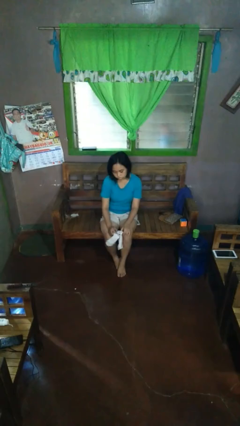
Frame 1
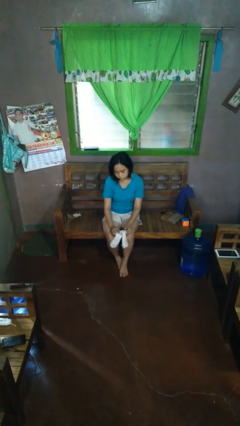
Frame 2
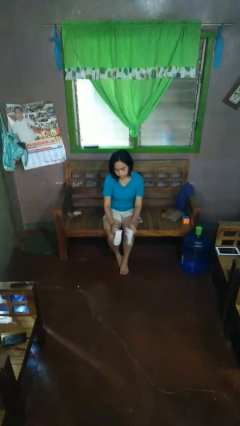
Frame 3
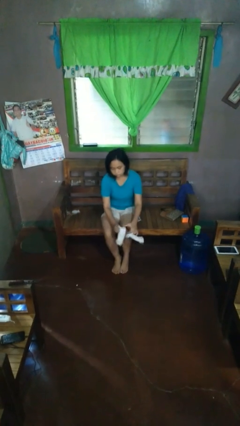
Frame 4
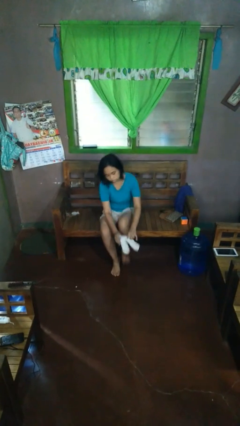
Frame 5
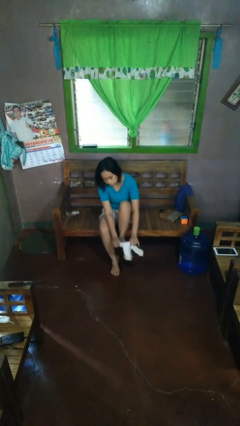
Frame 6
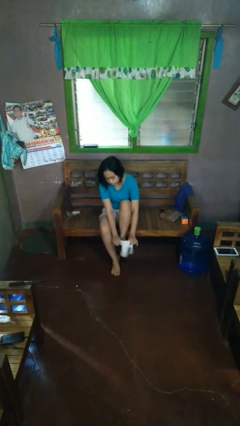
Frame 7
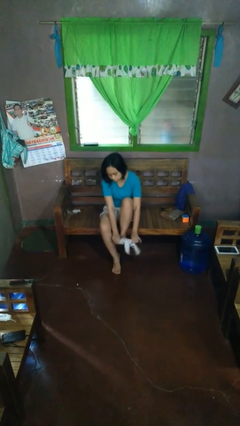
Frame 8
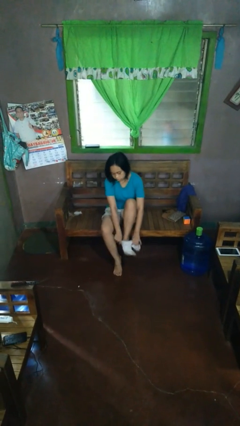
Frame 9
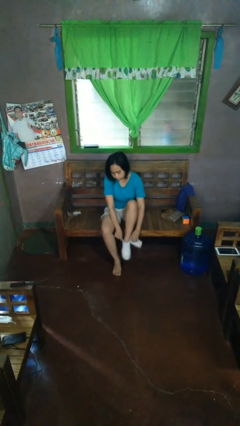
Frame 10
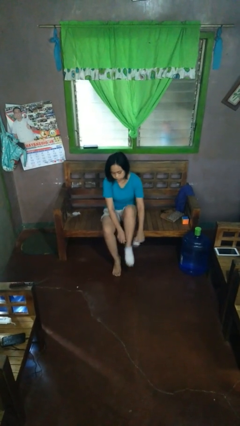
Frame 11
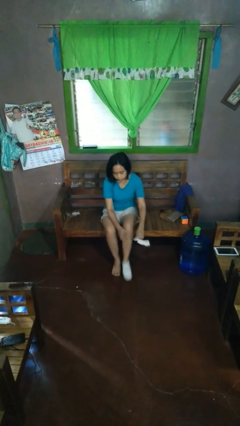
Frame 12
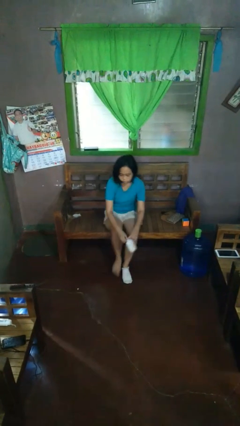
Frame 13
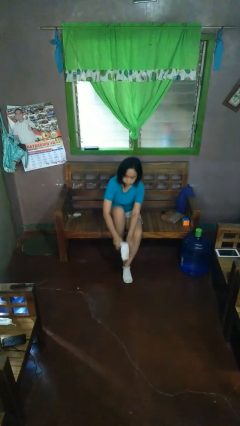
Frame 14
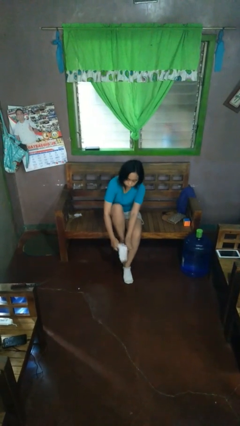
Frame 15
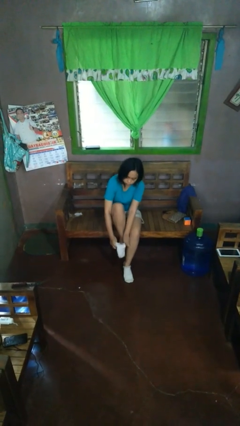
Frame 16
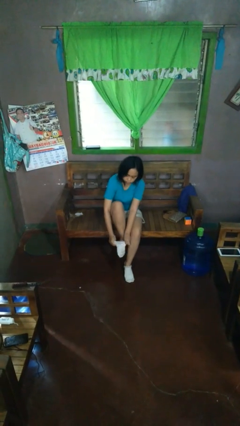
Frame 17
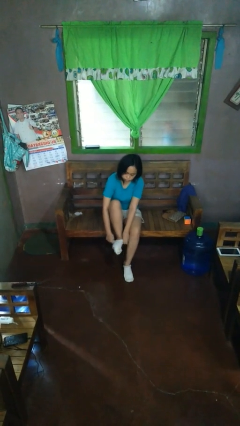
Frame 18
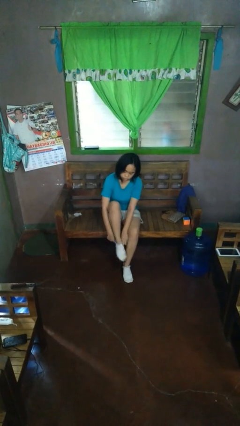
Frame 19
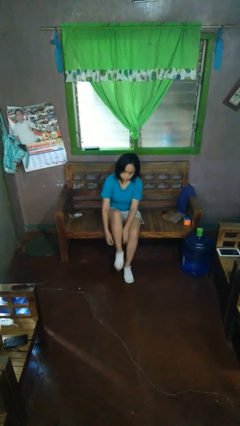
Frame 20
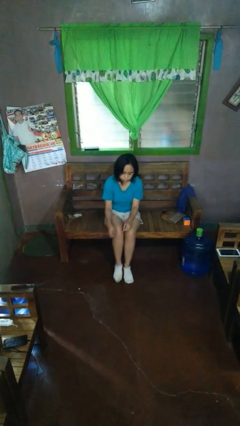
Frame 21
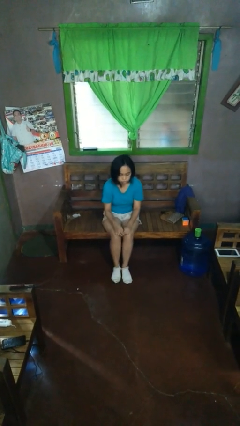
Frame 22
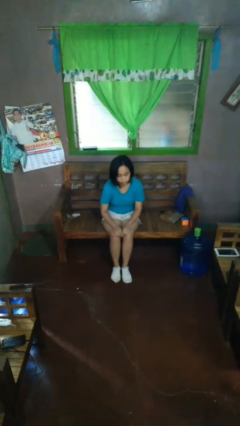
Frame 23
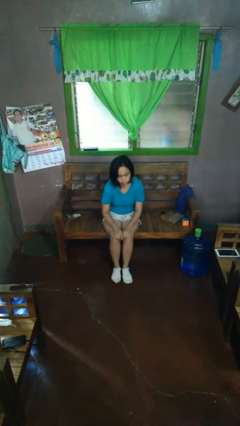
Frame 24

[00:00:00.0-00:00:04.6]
person puts on socks

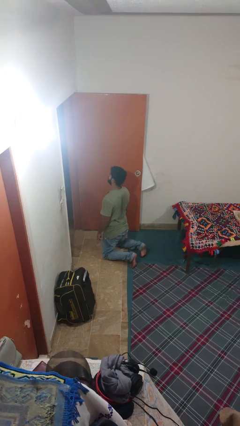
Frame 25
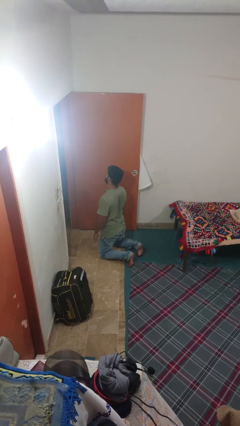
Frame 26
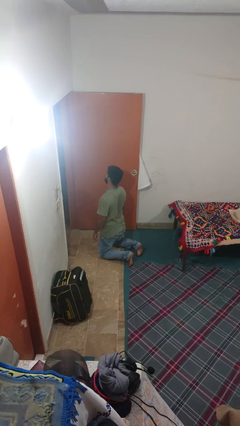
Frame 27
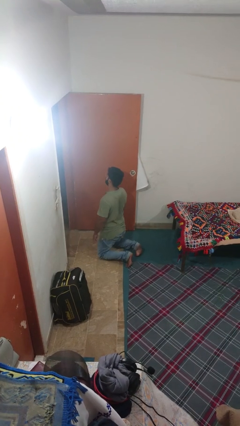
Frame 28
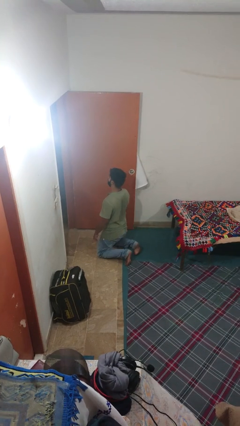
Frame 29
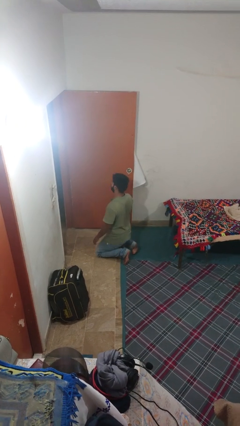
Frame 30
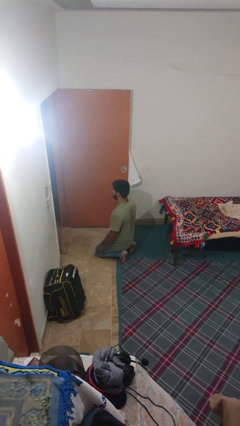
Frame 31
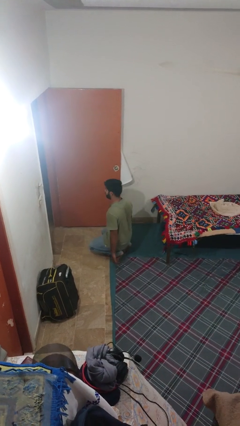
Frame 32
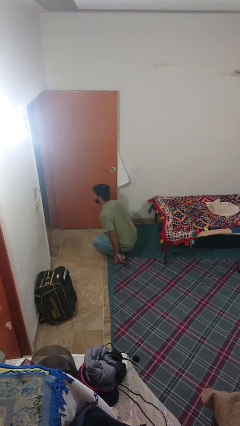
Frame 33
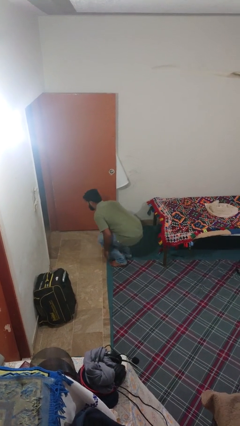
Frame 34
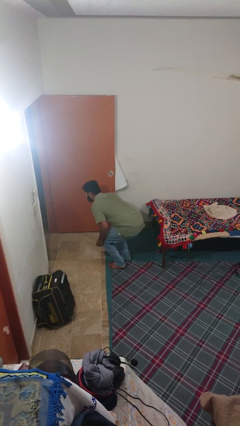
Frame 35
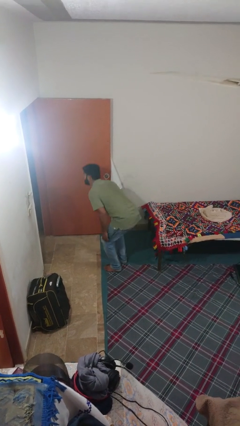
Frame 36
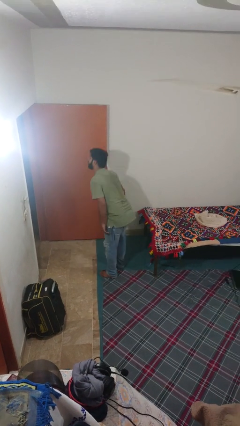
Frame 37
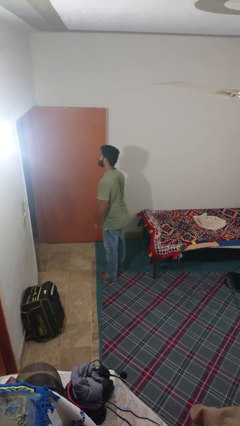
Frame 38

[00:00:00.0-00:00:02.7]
person stands up from floor

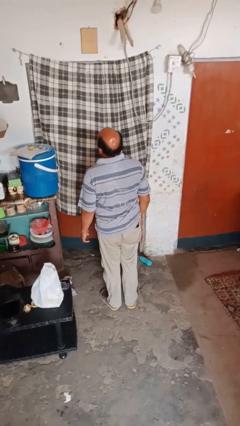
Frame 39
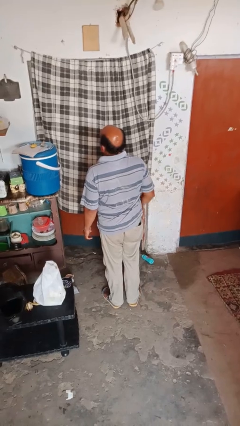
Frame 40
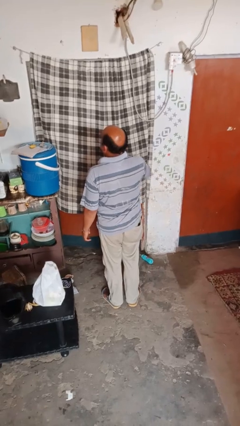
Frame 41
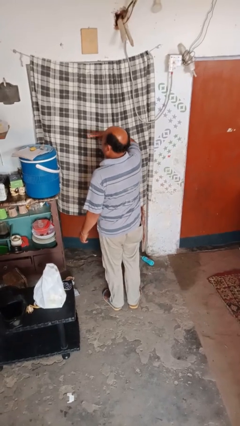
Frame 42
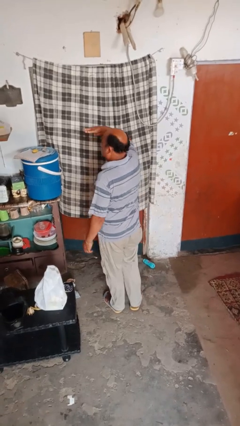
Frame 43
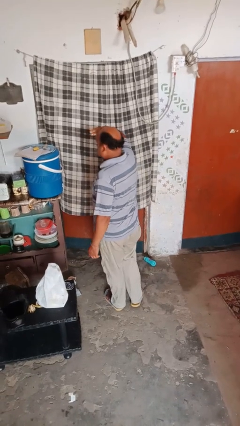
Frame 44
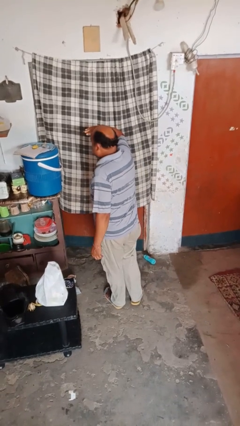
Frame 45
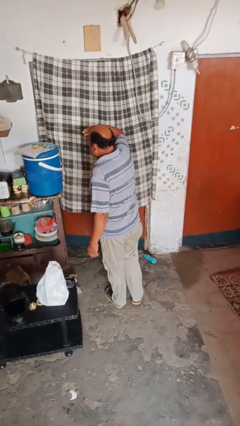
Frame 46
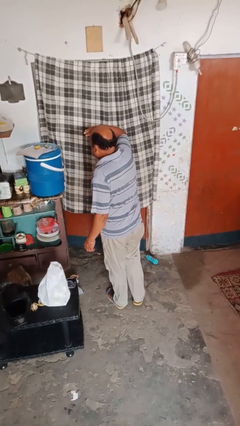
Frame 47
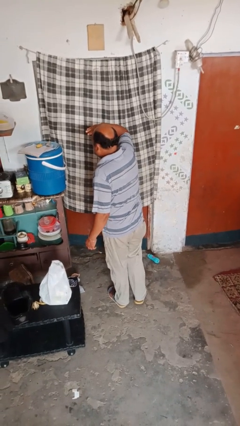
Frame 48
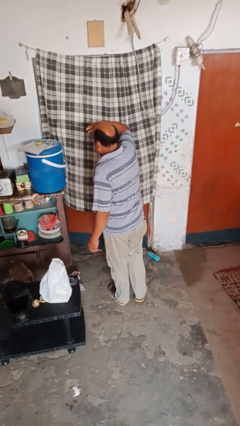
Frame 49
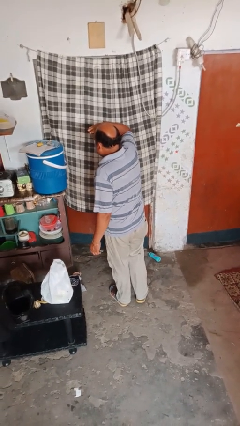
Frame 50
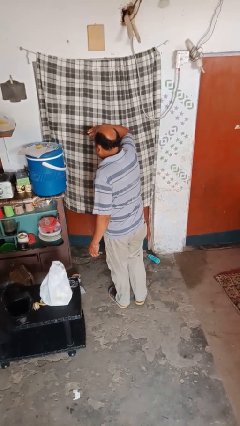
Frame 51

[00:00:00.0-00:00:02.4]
person salutes

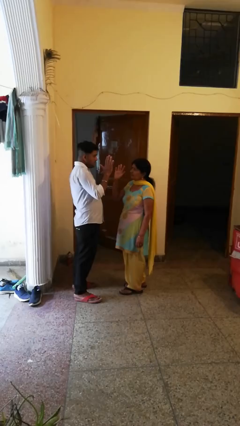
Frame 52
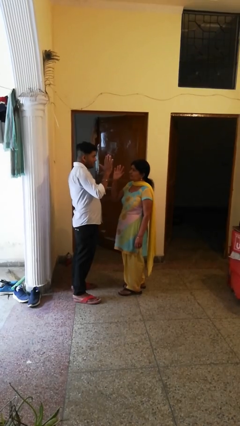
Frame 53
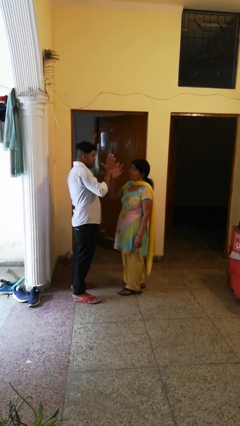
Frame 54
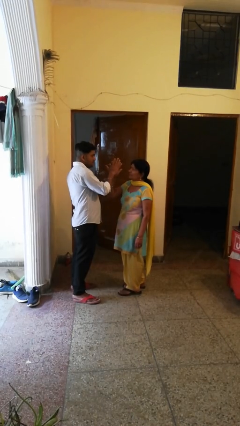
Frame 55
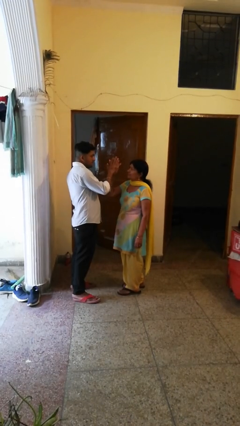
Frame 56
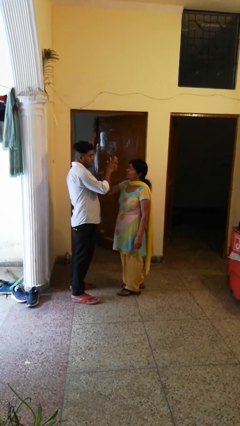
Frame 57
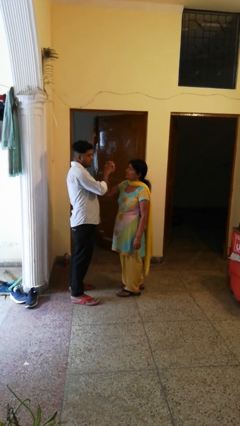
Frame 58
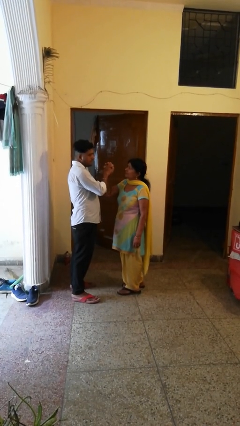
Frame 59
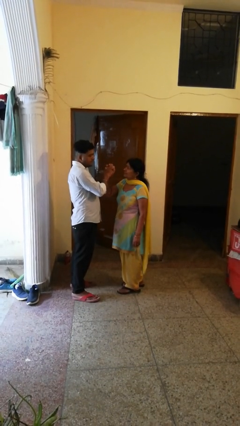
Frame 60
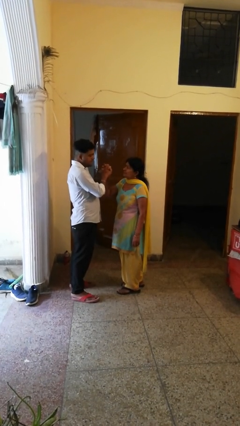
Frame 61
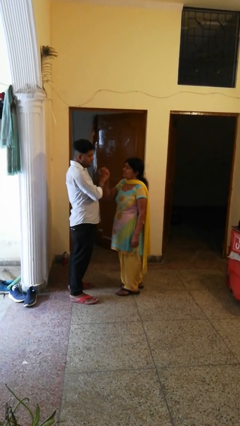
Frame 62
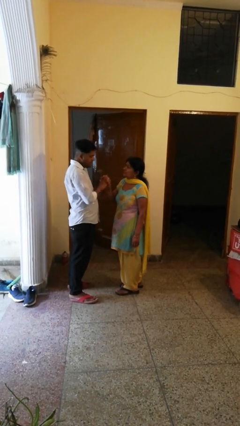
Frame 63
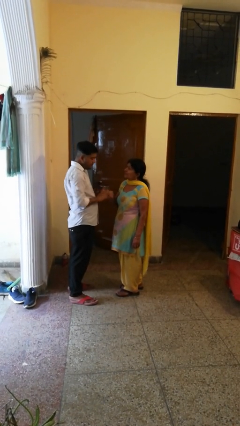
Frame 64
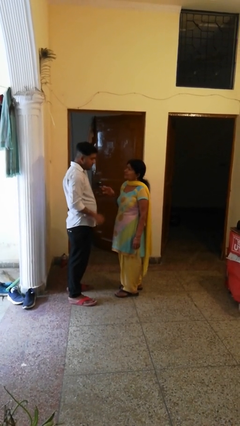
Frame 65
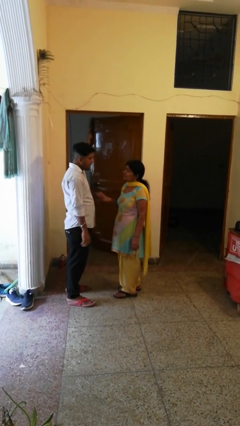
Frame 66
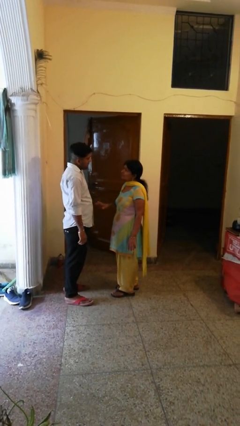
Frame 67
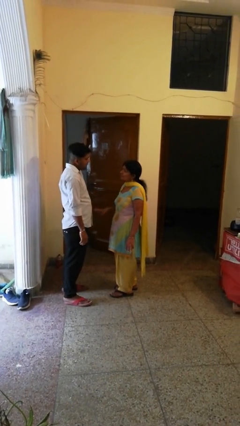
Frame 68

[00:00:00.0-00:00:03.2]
person highfives hand

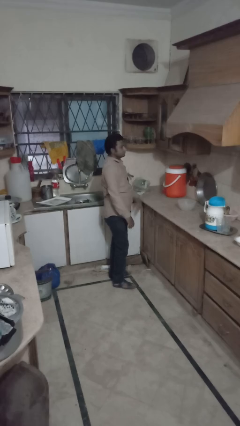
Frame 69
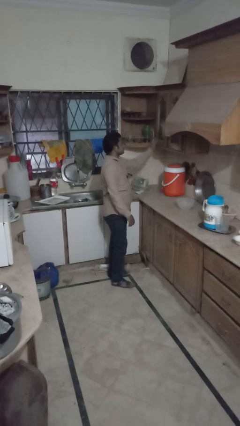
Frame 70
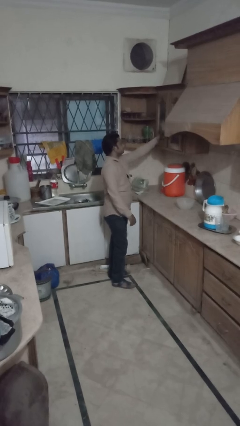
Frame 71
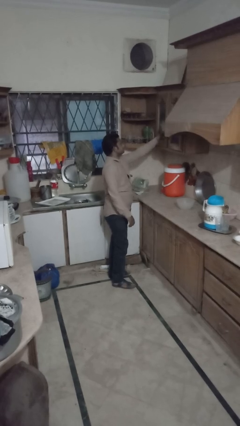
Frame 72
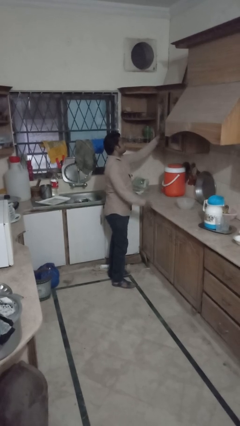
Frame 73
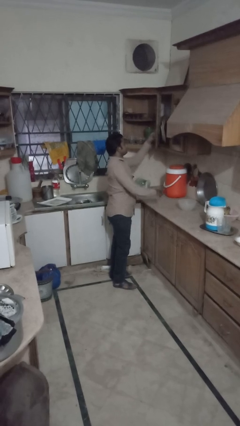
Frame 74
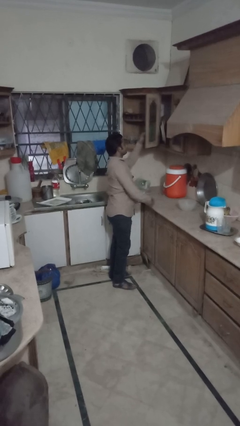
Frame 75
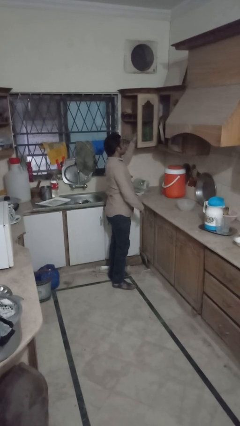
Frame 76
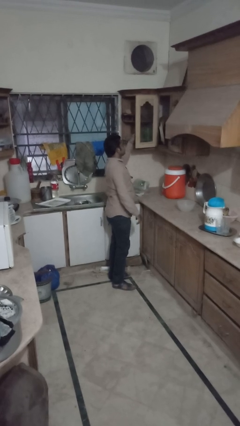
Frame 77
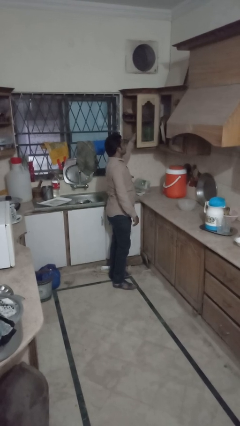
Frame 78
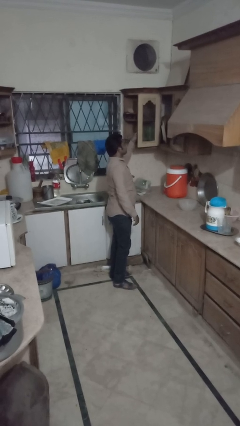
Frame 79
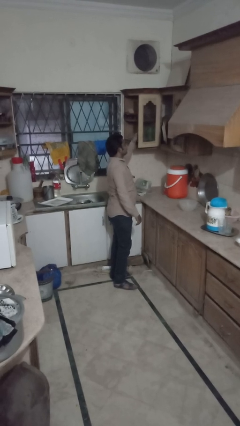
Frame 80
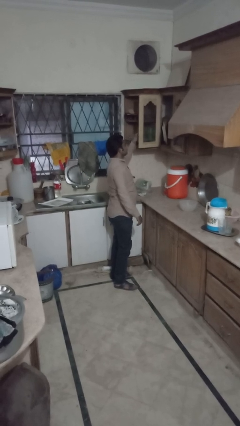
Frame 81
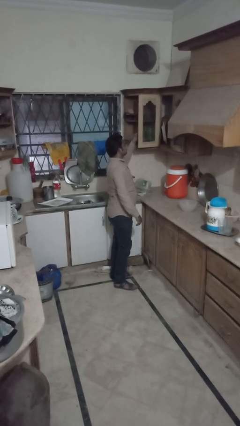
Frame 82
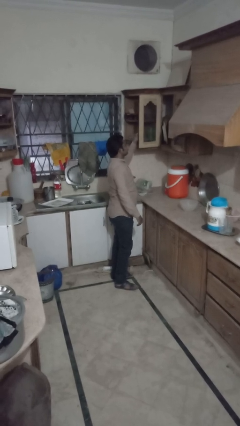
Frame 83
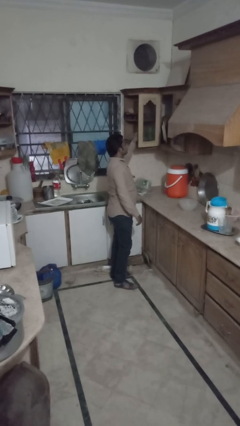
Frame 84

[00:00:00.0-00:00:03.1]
person opens cabinet

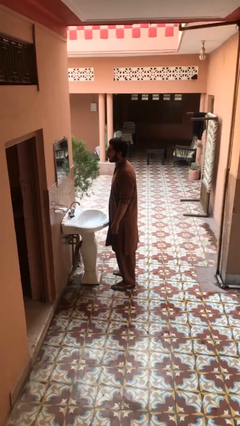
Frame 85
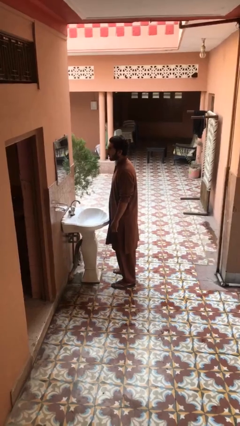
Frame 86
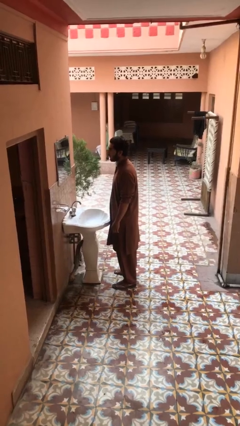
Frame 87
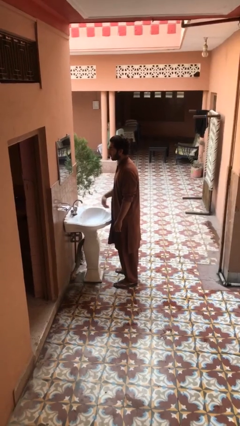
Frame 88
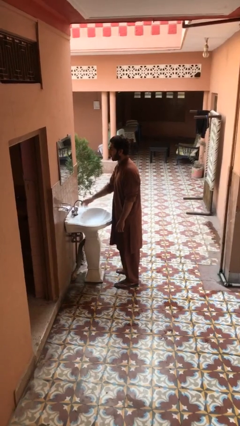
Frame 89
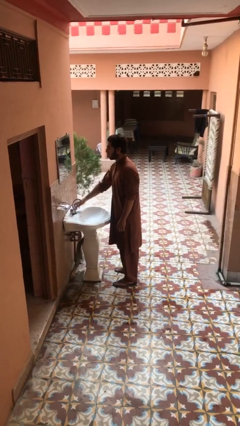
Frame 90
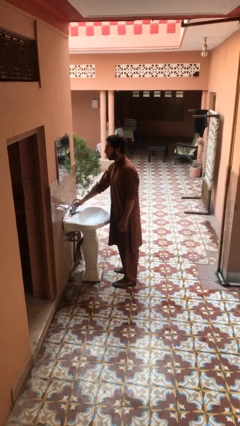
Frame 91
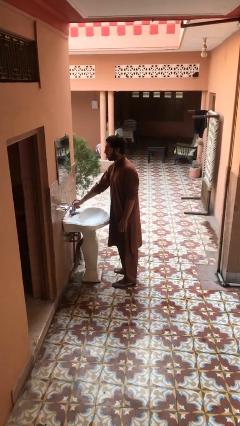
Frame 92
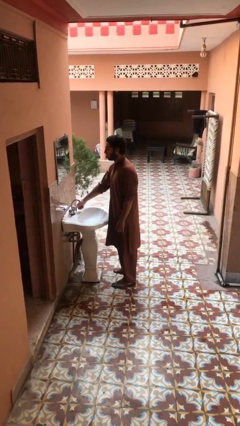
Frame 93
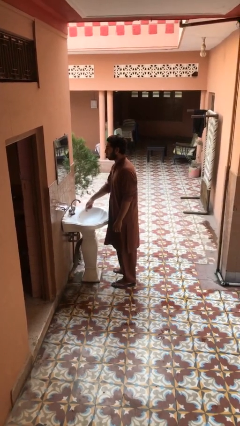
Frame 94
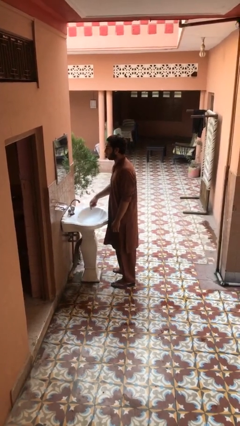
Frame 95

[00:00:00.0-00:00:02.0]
person turns off faucet
